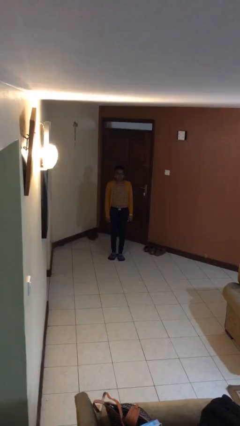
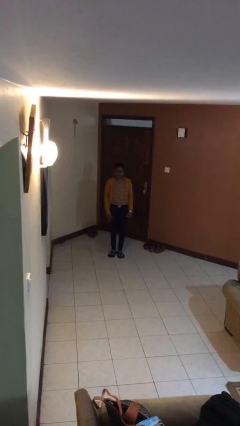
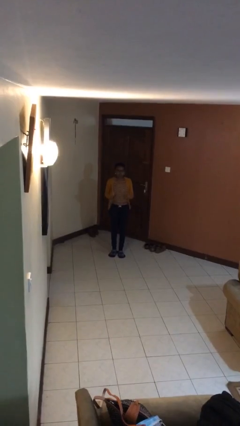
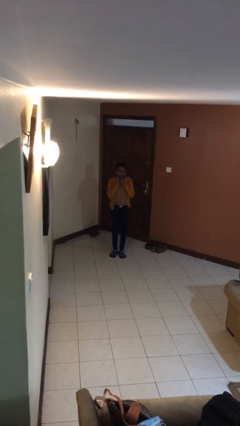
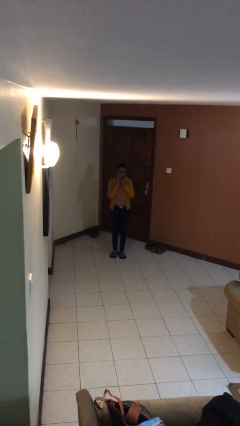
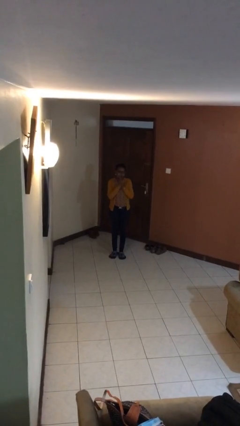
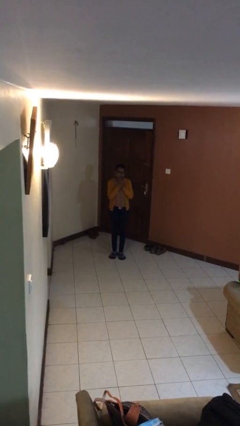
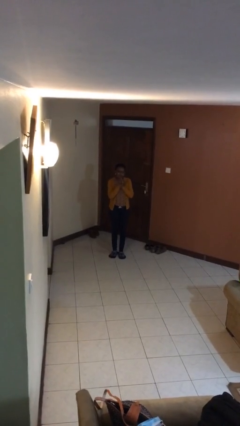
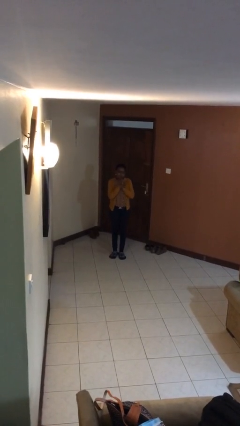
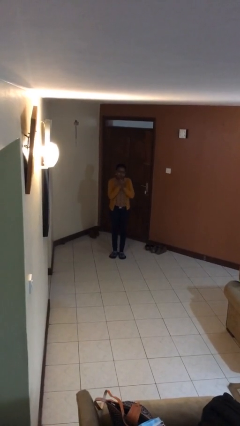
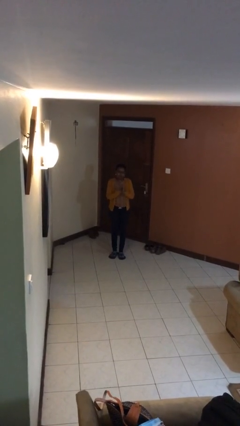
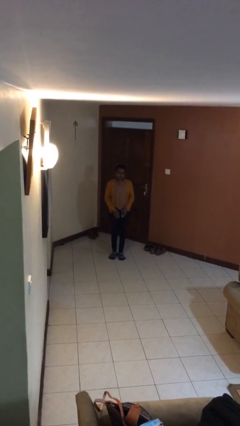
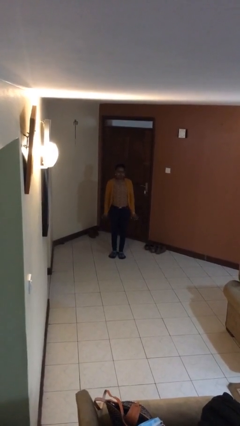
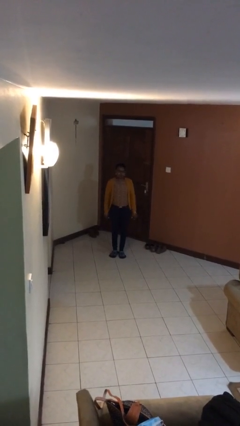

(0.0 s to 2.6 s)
person claps hands

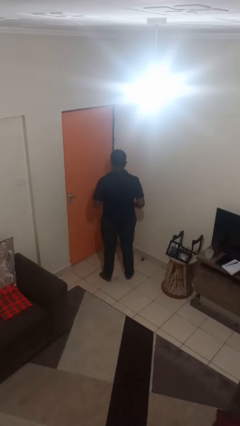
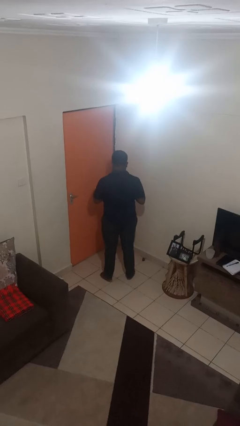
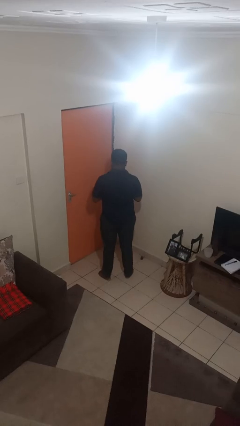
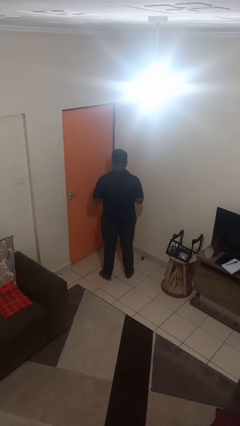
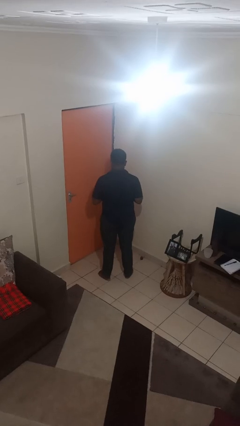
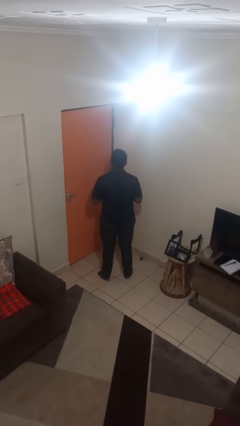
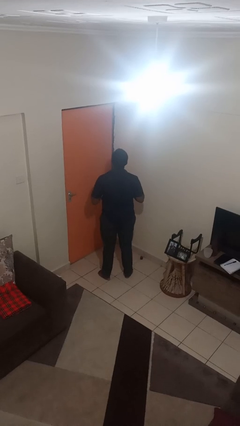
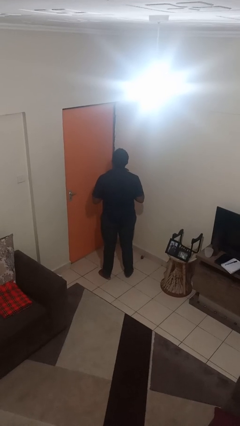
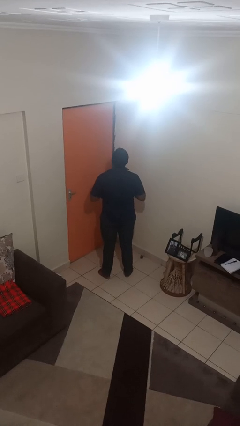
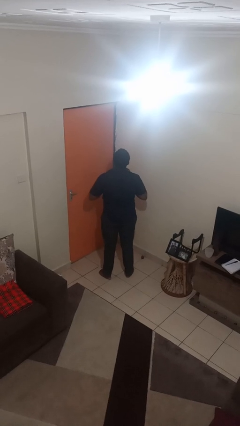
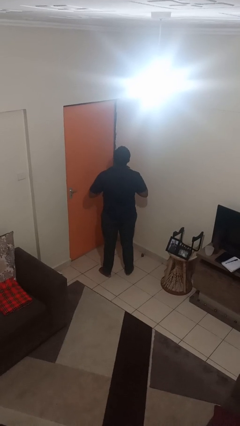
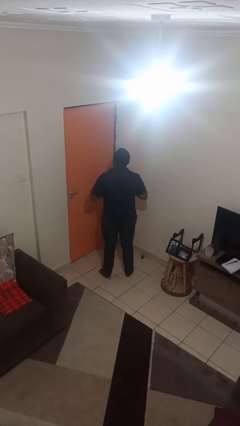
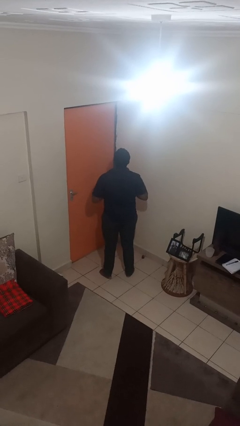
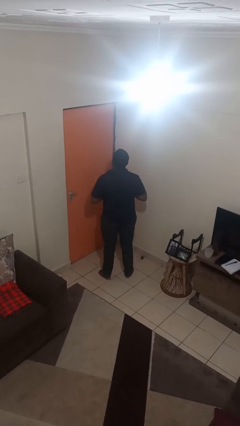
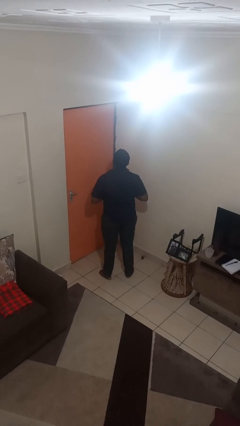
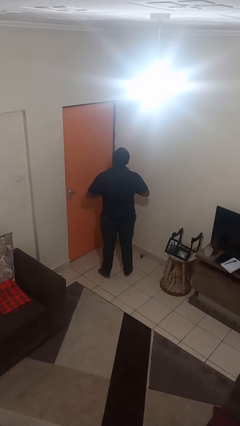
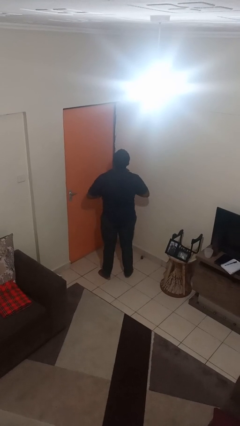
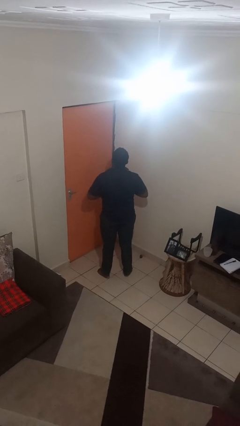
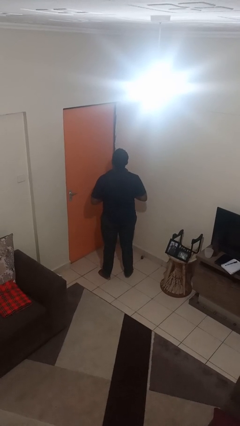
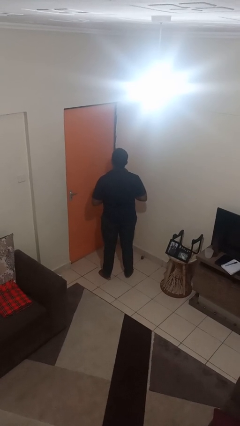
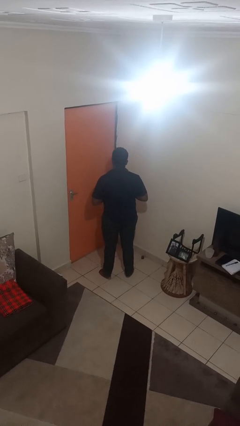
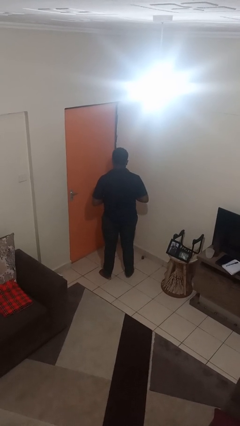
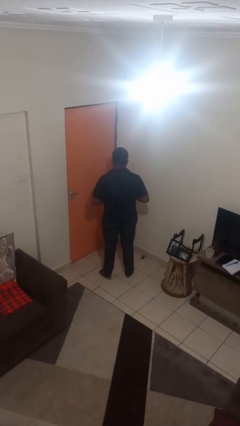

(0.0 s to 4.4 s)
person unbuttons shirt

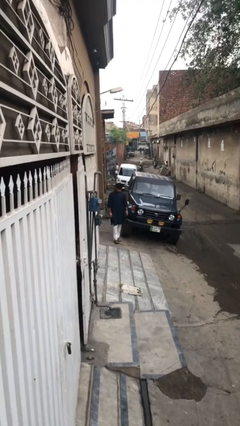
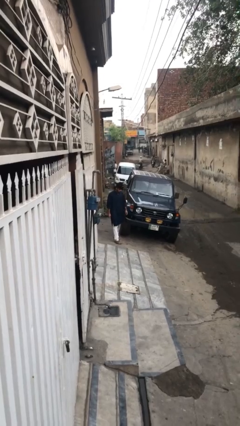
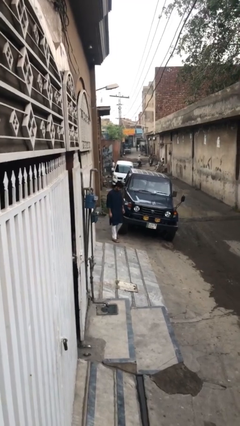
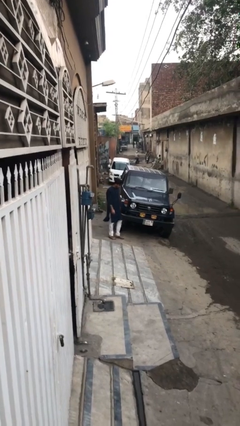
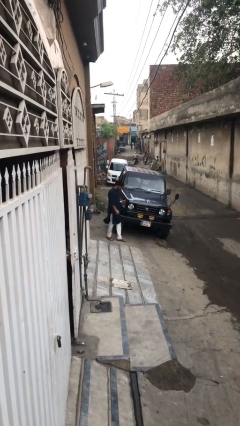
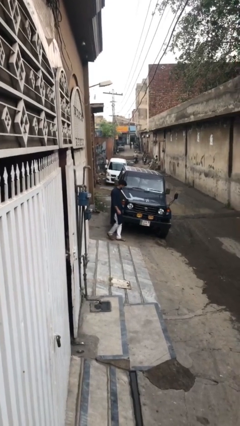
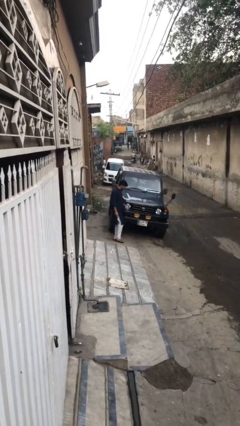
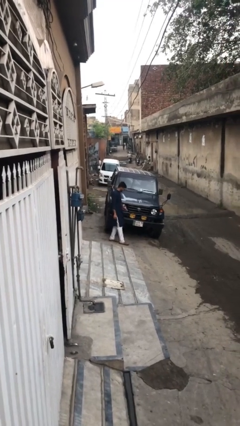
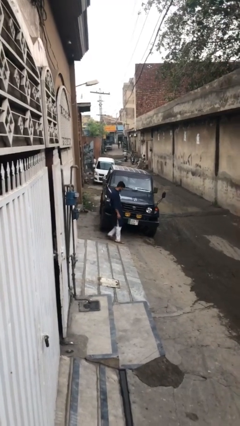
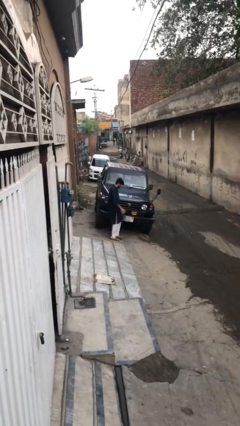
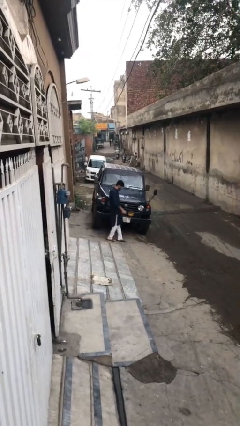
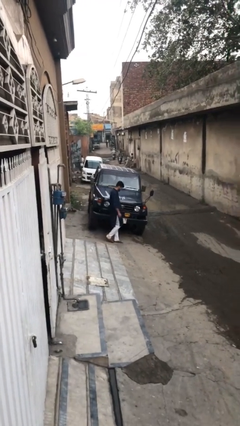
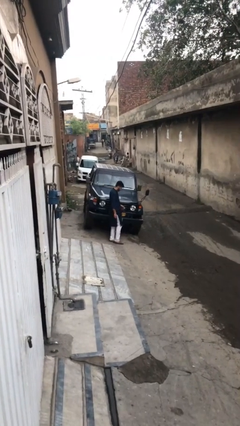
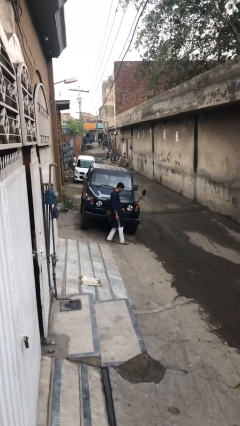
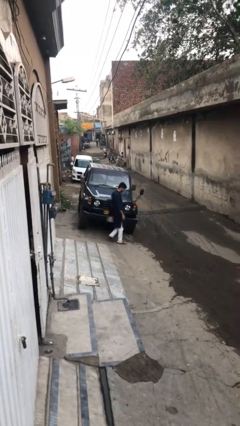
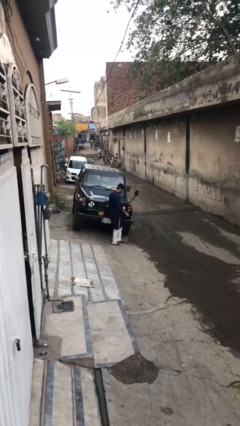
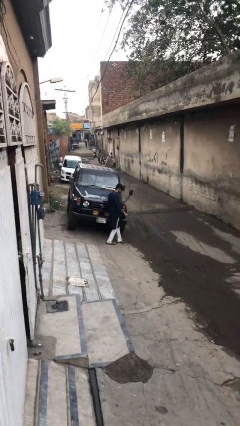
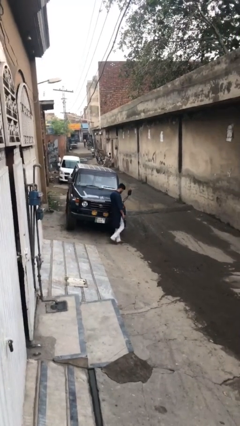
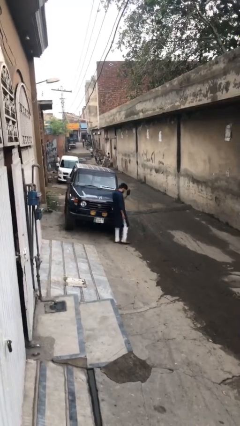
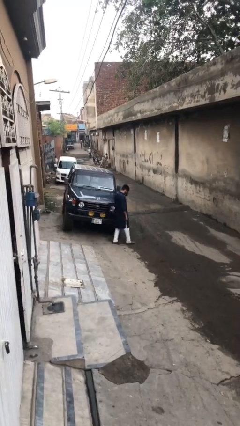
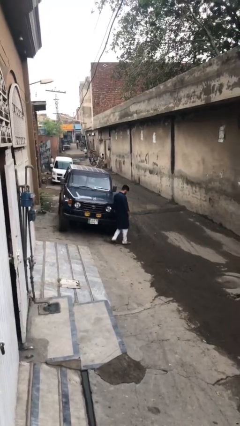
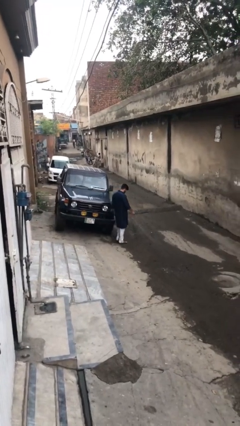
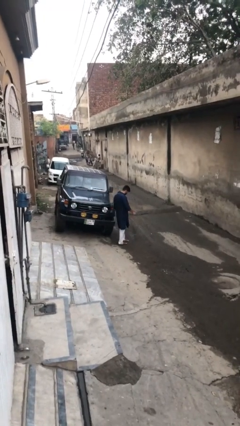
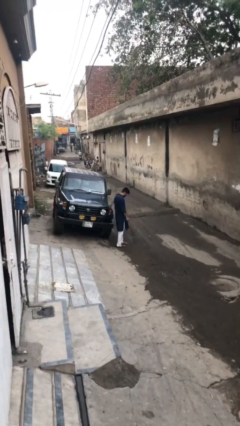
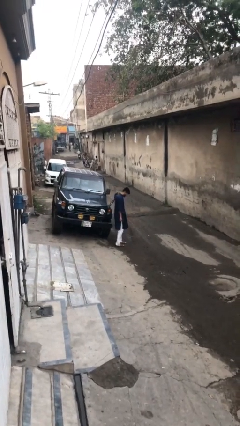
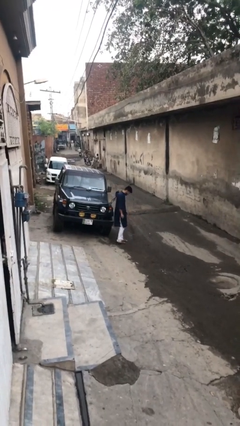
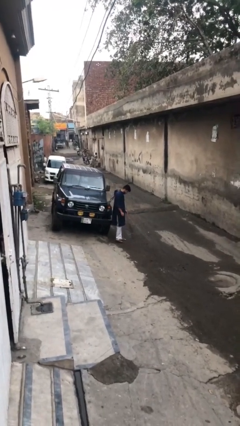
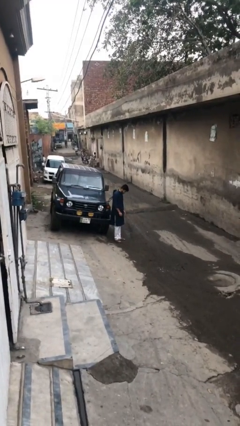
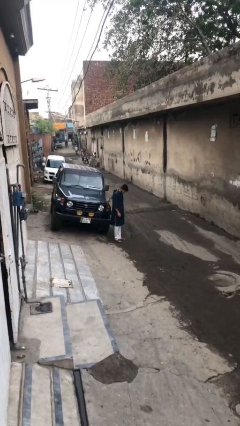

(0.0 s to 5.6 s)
person walks around car

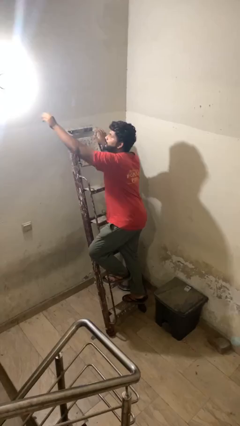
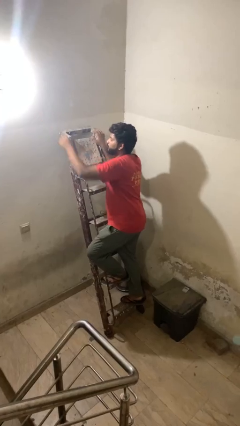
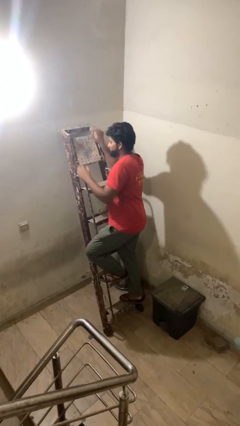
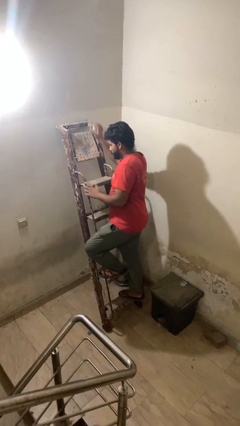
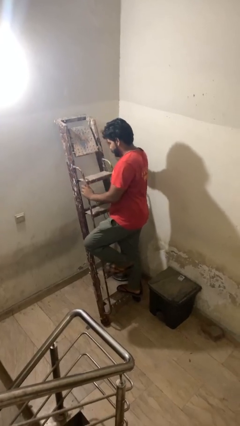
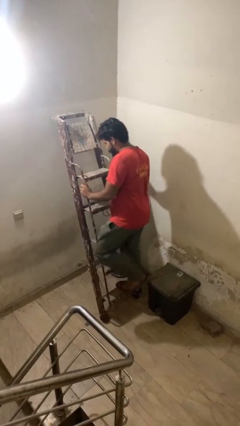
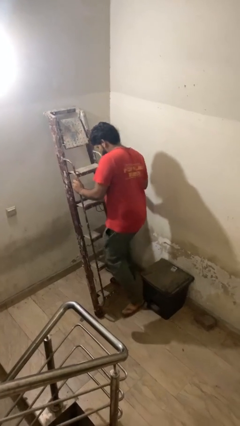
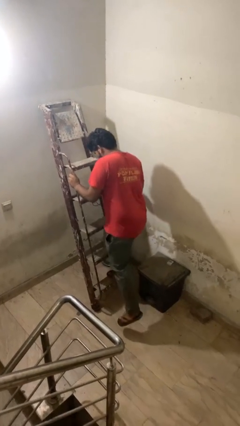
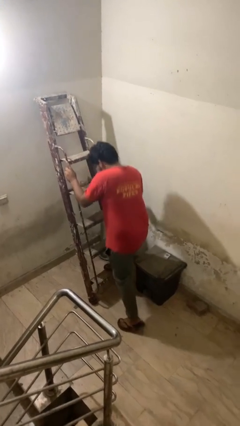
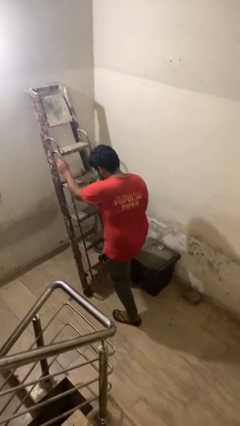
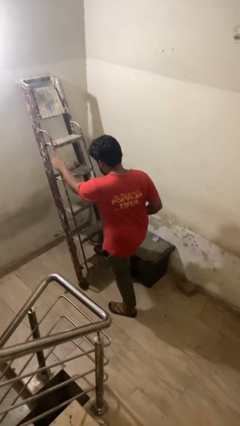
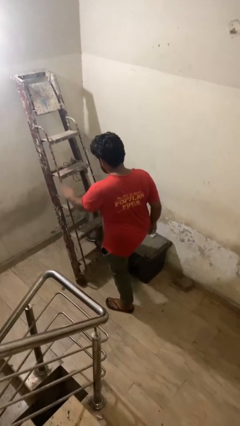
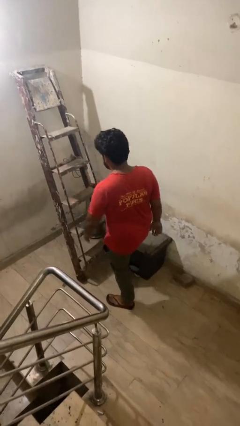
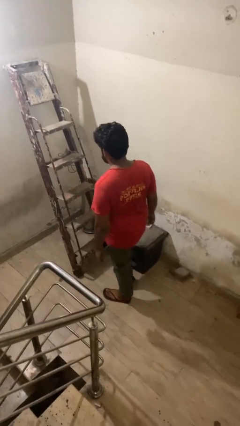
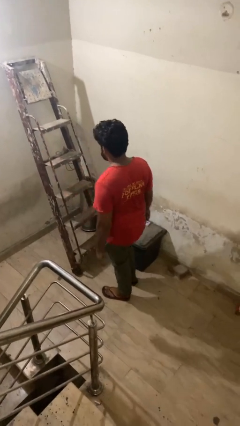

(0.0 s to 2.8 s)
person climbs down ladder

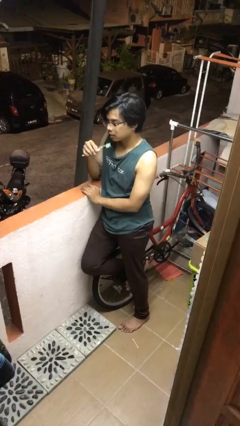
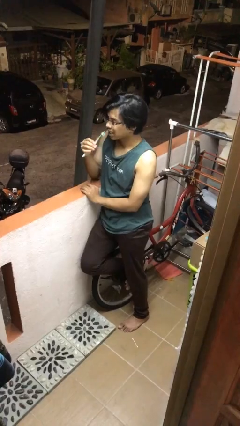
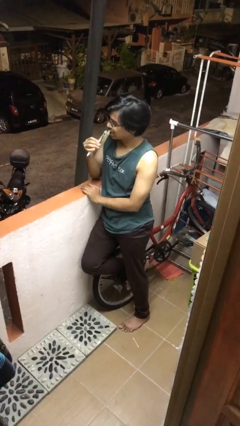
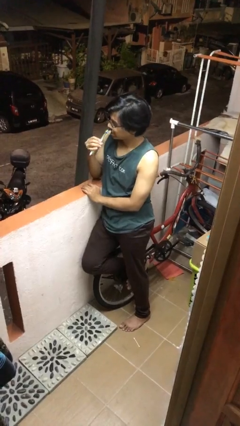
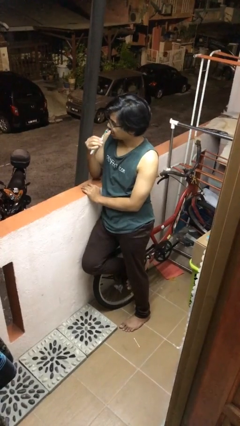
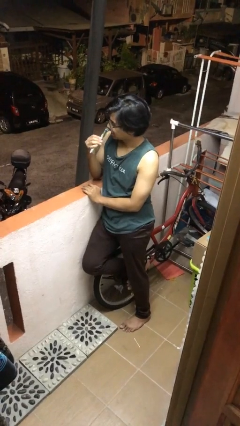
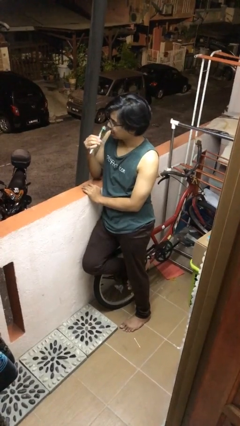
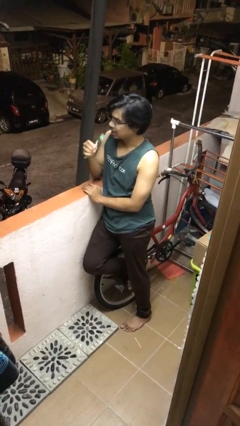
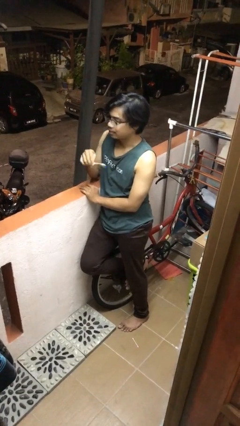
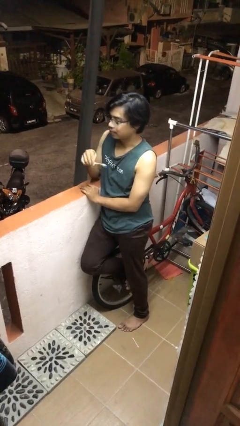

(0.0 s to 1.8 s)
person brushes teeth
